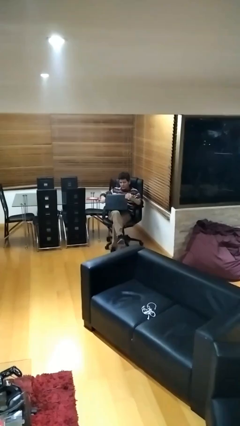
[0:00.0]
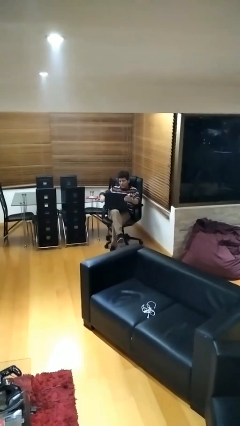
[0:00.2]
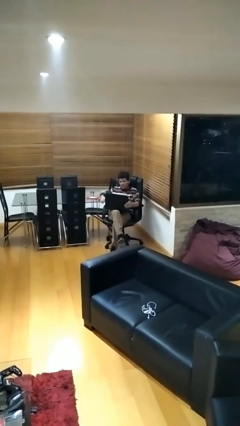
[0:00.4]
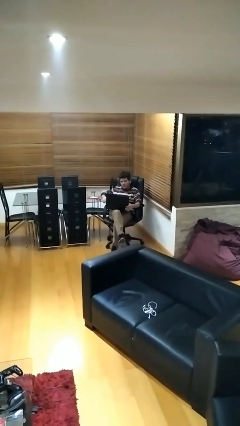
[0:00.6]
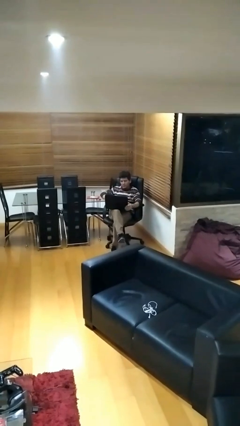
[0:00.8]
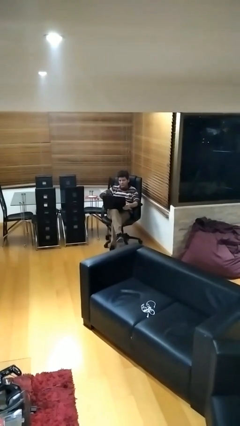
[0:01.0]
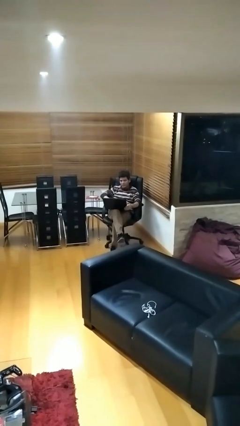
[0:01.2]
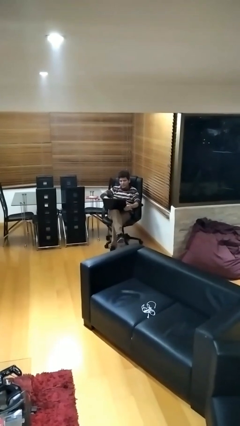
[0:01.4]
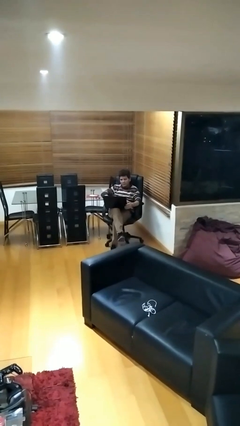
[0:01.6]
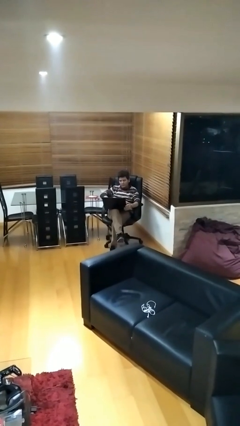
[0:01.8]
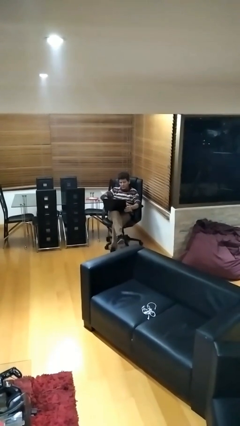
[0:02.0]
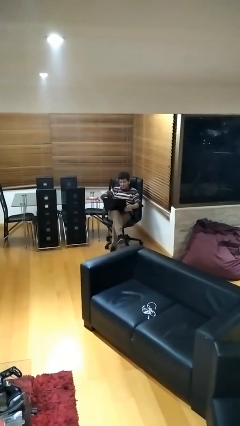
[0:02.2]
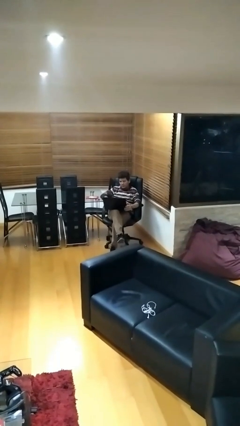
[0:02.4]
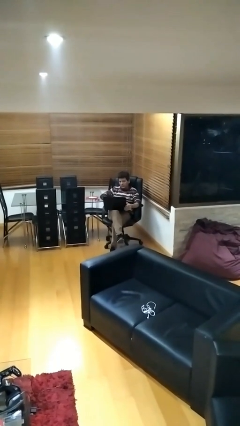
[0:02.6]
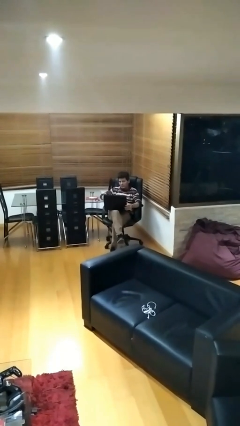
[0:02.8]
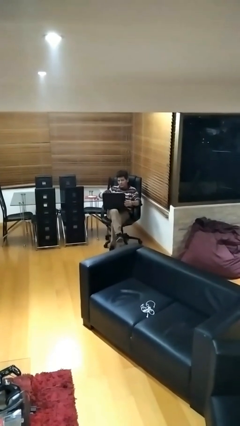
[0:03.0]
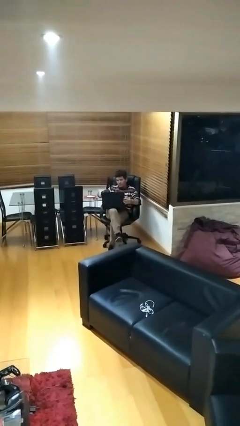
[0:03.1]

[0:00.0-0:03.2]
person interacts with laptop

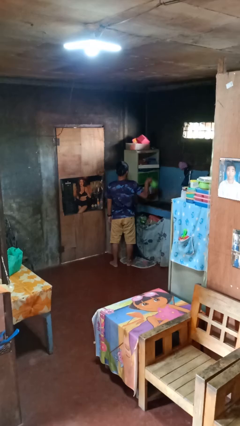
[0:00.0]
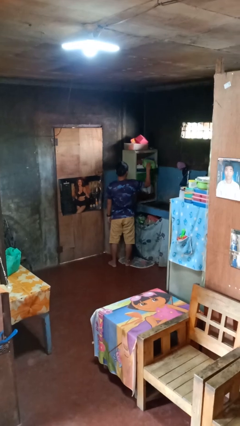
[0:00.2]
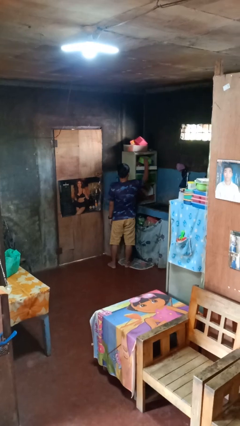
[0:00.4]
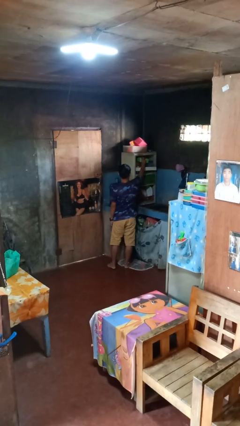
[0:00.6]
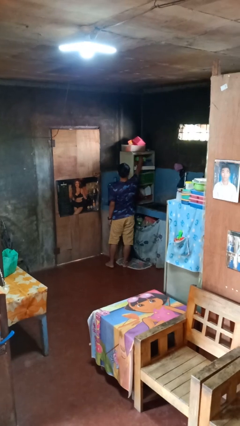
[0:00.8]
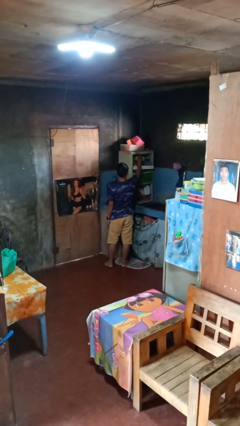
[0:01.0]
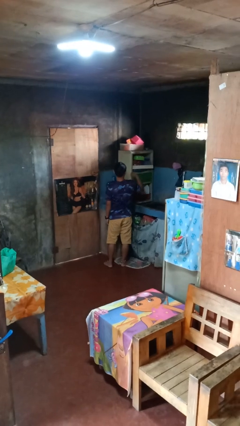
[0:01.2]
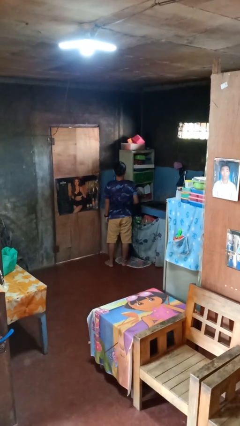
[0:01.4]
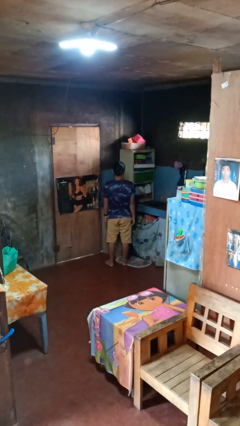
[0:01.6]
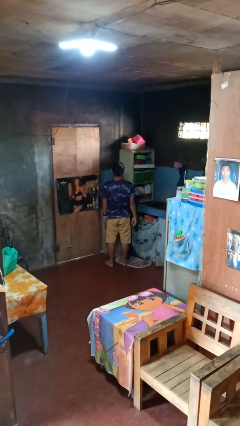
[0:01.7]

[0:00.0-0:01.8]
person puts object in cabinet

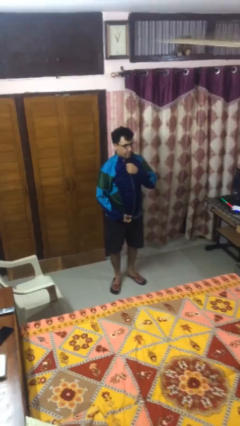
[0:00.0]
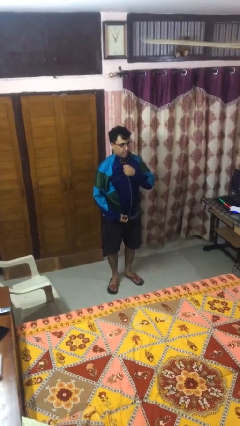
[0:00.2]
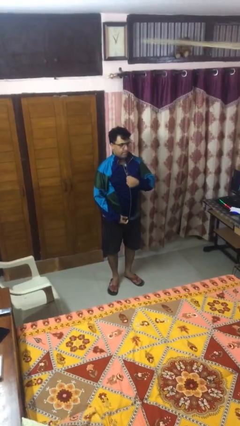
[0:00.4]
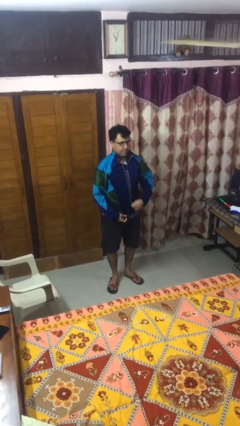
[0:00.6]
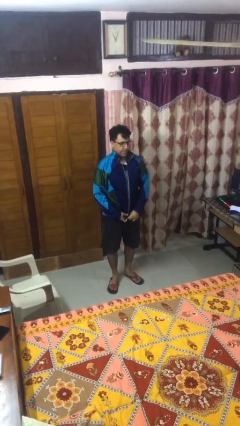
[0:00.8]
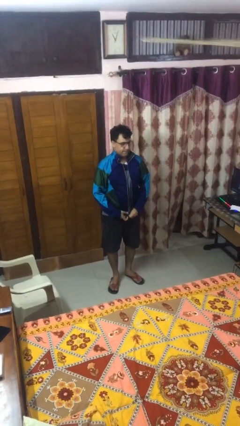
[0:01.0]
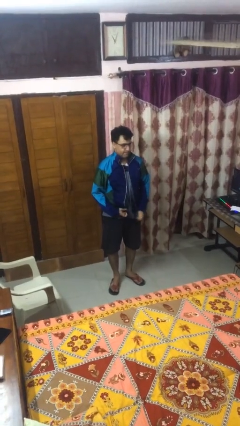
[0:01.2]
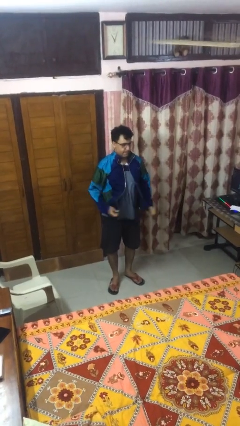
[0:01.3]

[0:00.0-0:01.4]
person unzips jacket

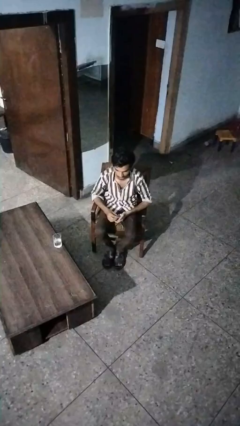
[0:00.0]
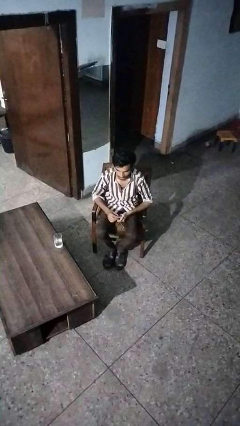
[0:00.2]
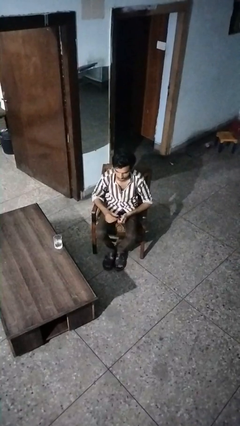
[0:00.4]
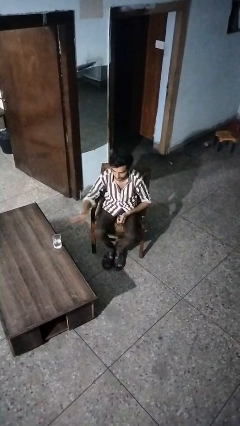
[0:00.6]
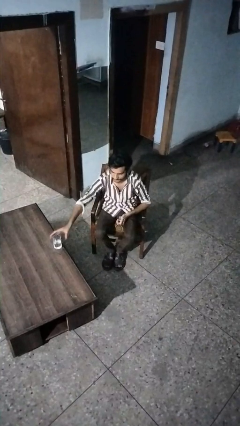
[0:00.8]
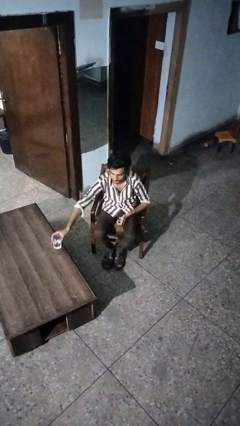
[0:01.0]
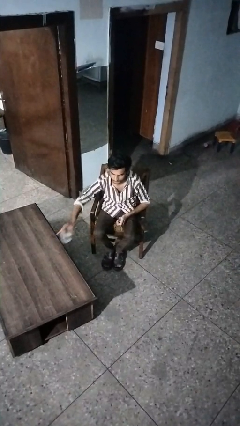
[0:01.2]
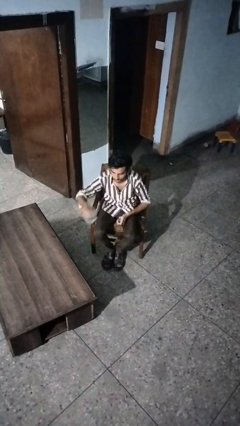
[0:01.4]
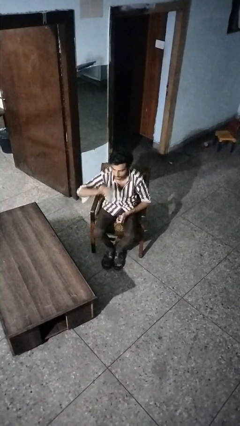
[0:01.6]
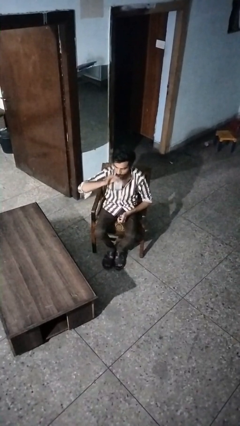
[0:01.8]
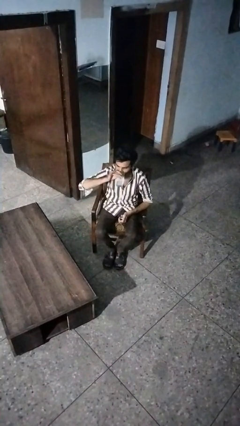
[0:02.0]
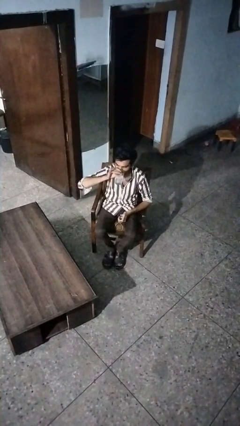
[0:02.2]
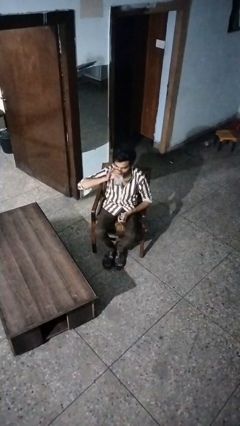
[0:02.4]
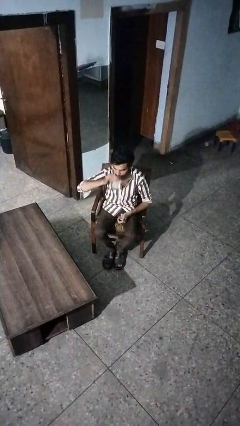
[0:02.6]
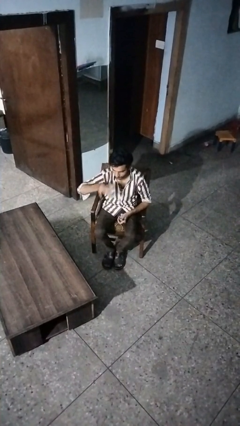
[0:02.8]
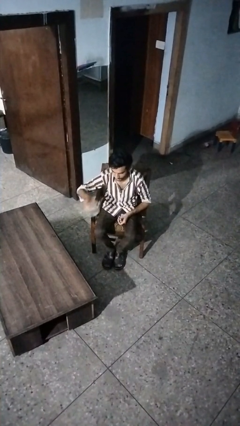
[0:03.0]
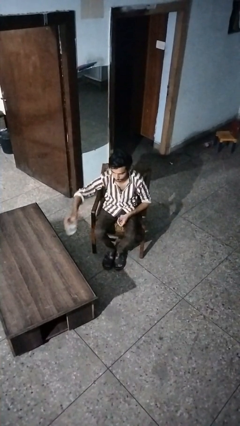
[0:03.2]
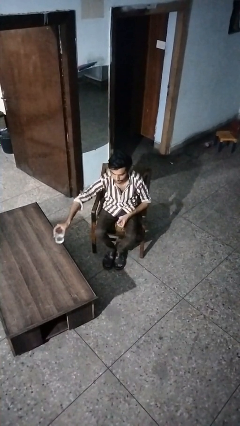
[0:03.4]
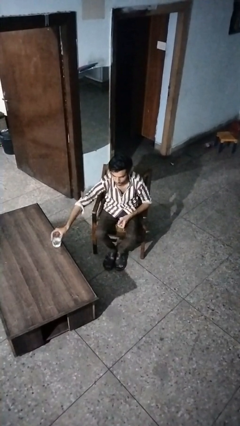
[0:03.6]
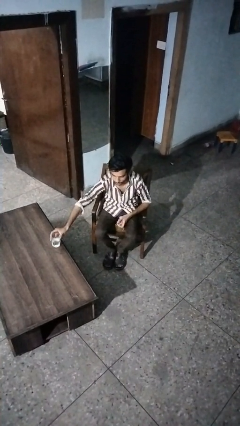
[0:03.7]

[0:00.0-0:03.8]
person drinks from cup

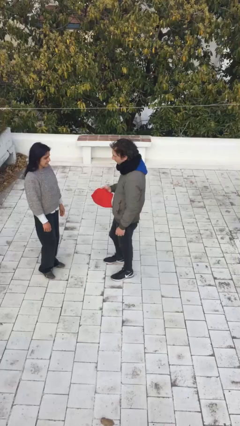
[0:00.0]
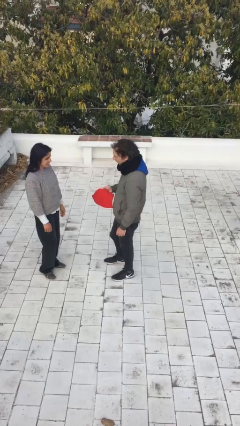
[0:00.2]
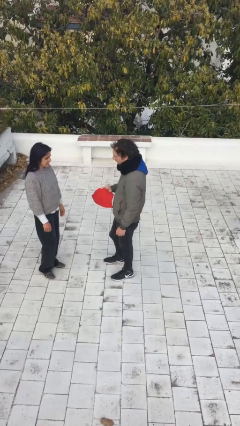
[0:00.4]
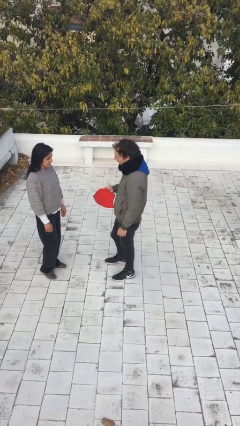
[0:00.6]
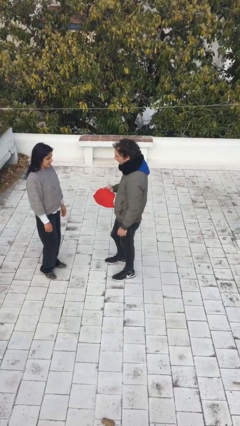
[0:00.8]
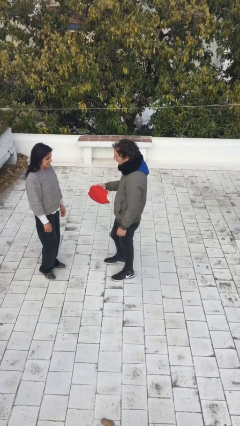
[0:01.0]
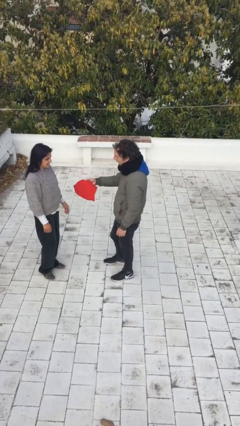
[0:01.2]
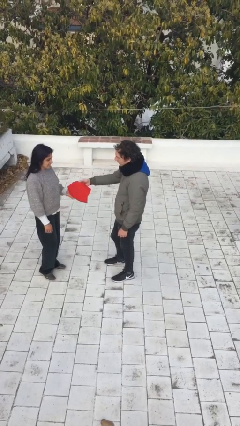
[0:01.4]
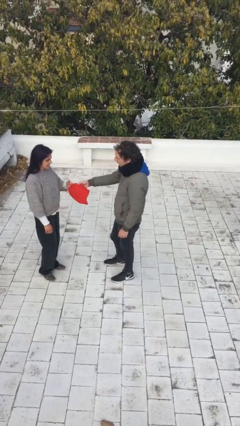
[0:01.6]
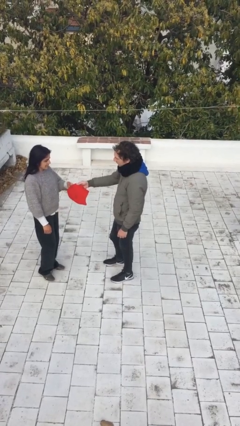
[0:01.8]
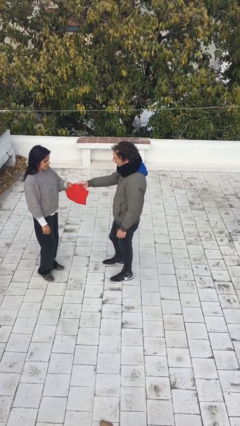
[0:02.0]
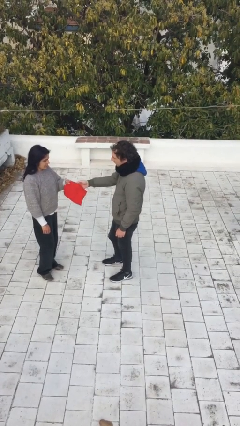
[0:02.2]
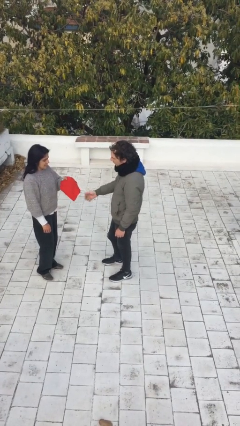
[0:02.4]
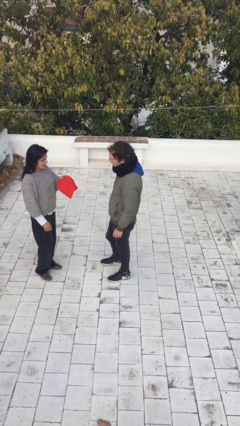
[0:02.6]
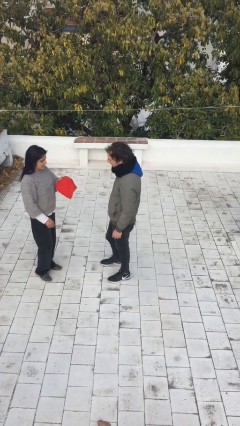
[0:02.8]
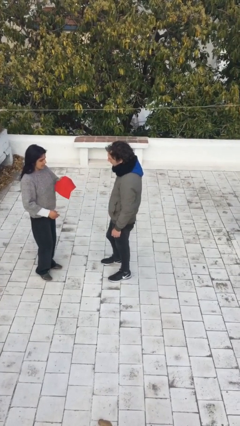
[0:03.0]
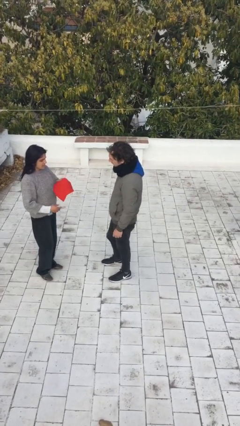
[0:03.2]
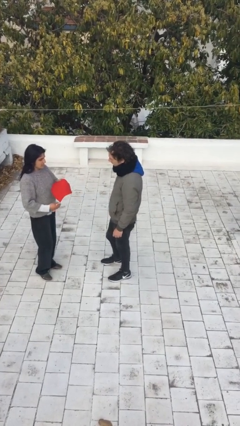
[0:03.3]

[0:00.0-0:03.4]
person transfers object to person

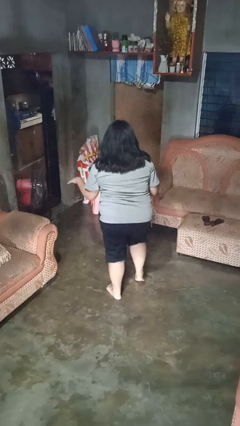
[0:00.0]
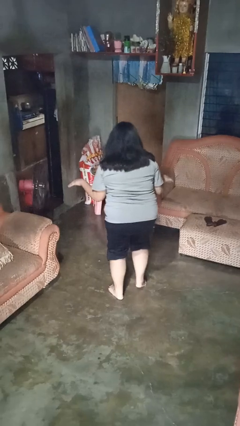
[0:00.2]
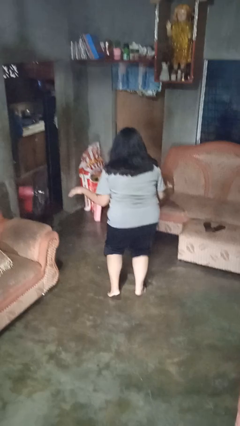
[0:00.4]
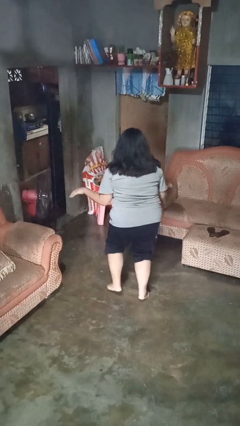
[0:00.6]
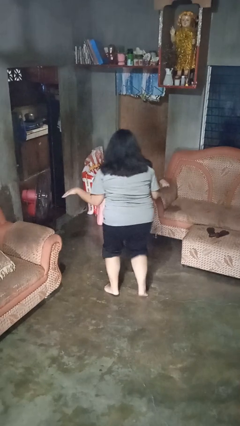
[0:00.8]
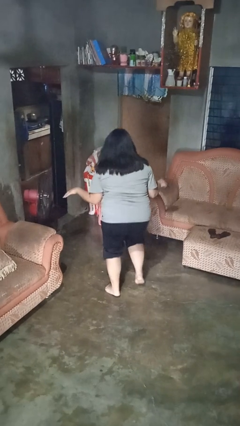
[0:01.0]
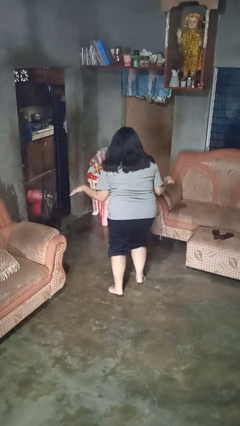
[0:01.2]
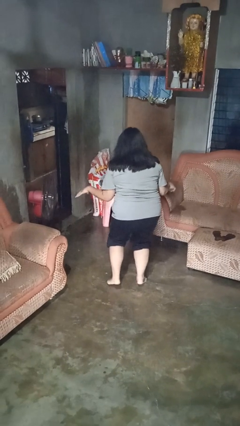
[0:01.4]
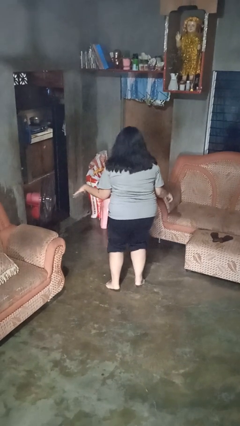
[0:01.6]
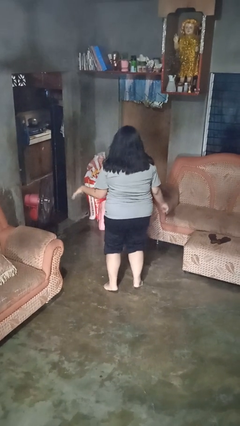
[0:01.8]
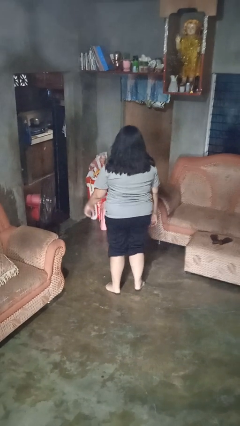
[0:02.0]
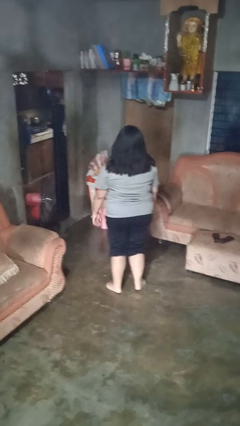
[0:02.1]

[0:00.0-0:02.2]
person walks tiptoe

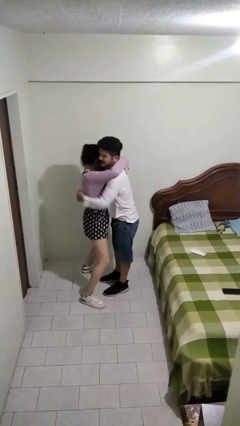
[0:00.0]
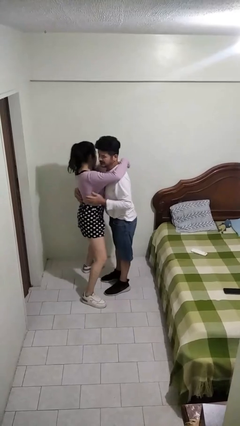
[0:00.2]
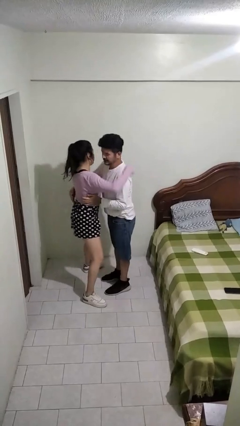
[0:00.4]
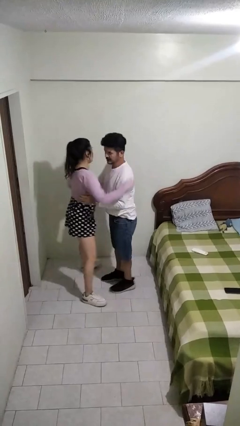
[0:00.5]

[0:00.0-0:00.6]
person puts down person

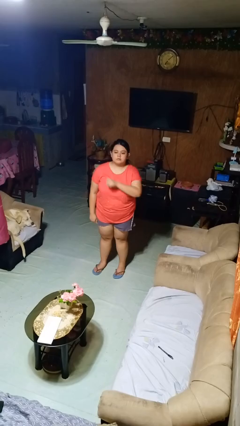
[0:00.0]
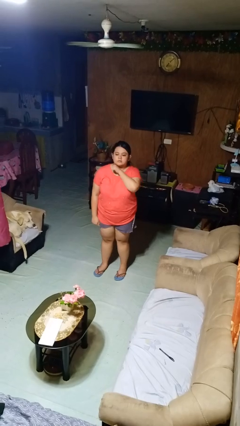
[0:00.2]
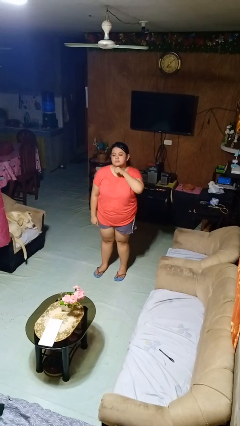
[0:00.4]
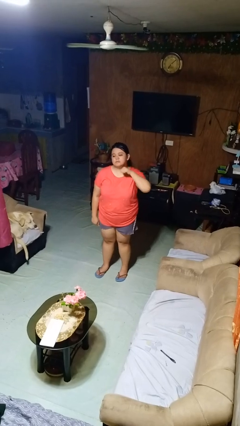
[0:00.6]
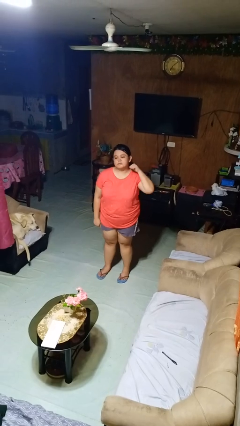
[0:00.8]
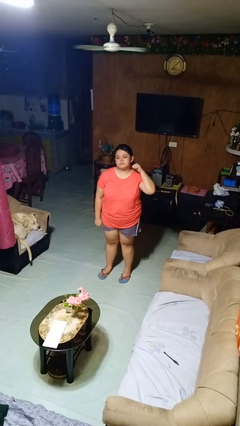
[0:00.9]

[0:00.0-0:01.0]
person gestures cut
